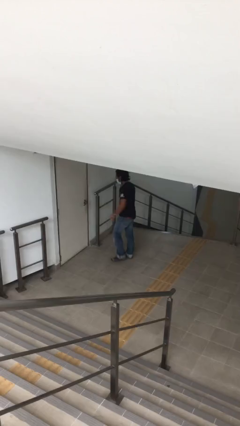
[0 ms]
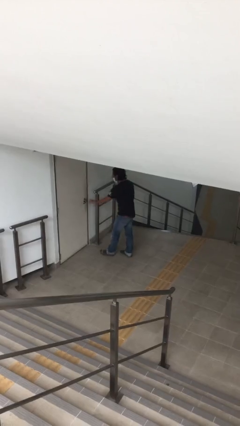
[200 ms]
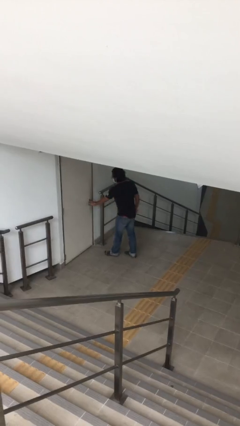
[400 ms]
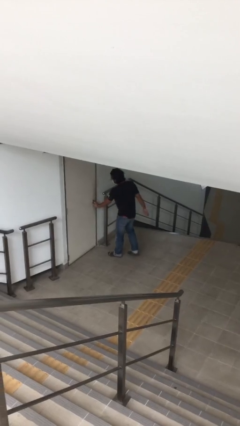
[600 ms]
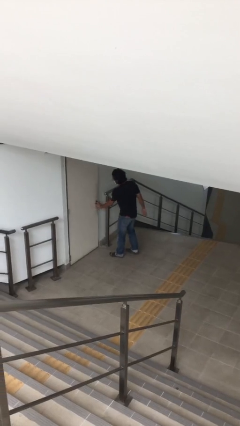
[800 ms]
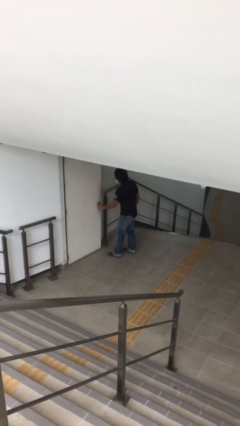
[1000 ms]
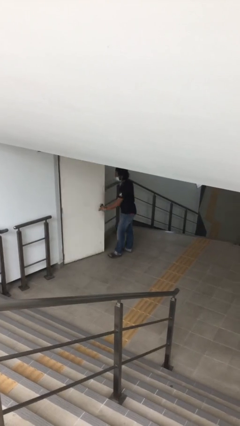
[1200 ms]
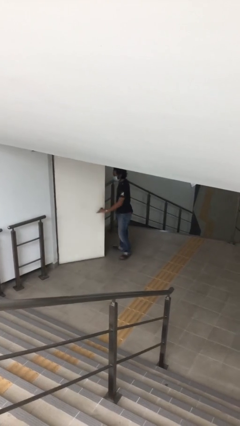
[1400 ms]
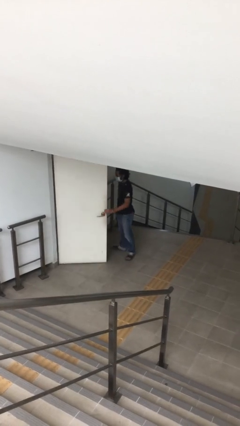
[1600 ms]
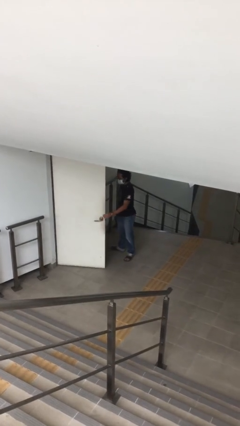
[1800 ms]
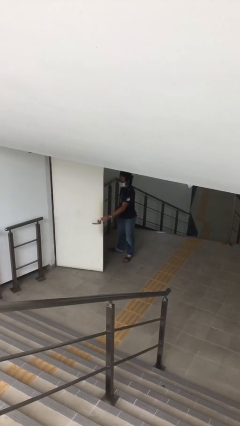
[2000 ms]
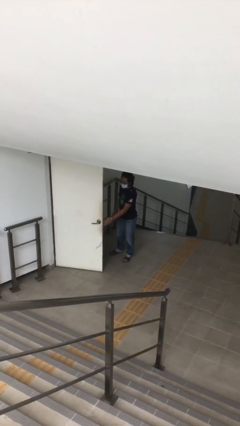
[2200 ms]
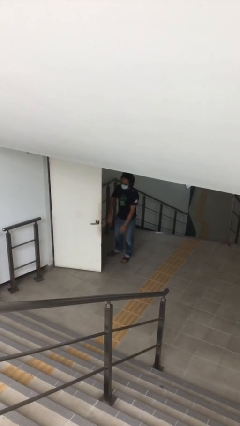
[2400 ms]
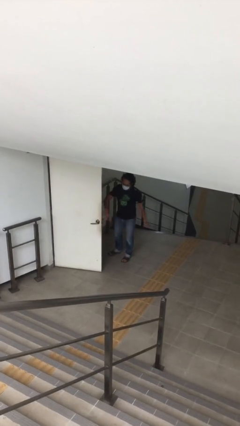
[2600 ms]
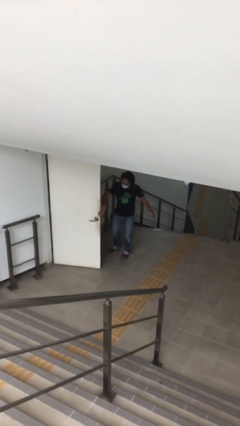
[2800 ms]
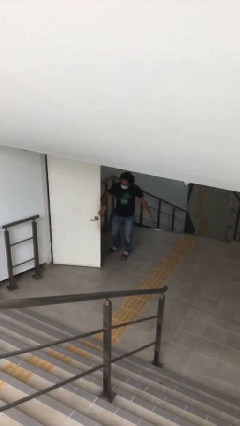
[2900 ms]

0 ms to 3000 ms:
person opens facility door

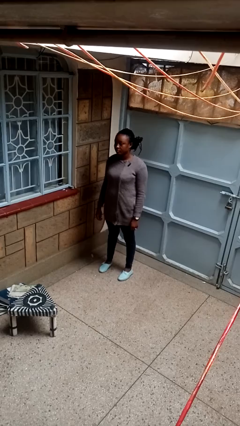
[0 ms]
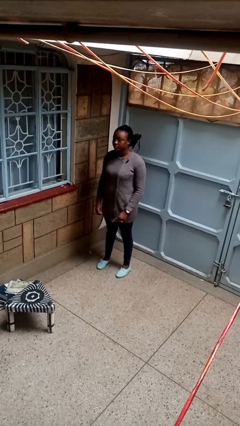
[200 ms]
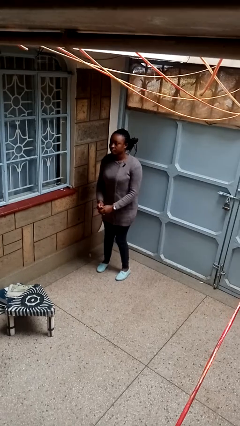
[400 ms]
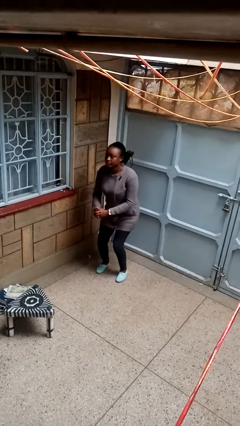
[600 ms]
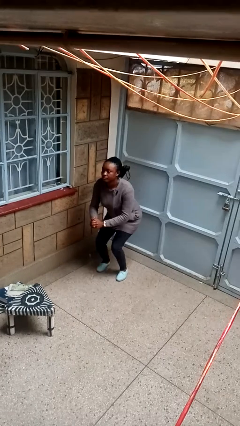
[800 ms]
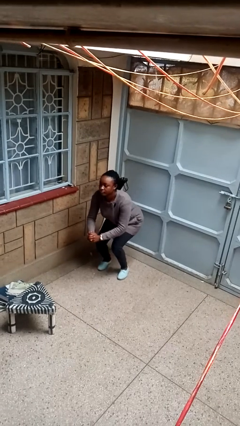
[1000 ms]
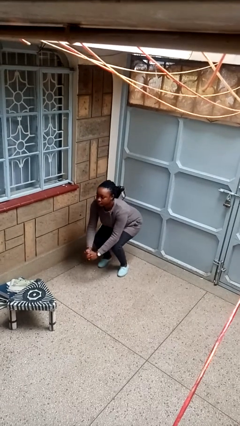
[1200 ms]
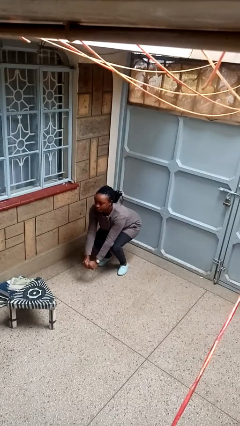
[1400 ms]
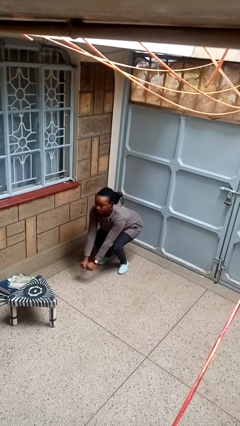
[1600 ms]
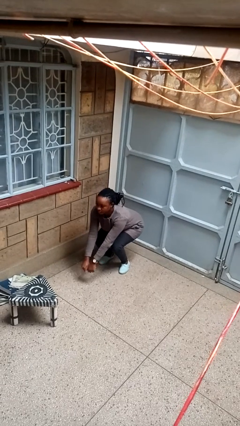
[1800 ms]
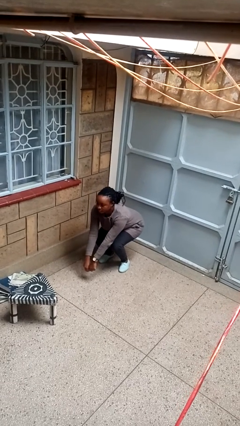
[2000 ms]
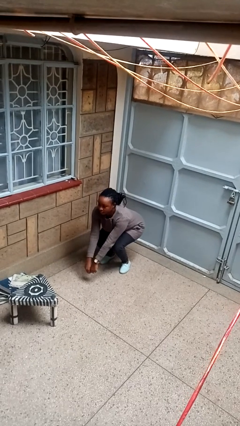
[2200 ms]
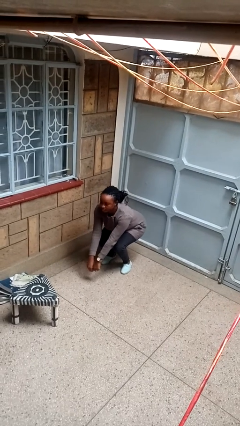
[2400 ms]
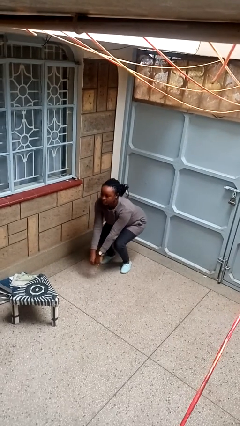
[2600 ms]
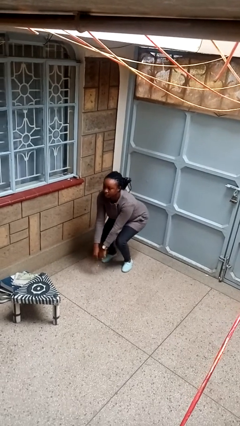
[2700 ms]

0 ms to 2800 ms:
person squats

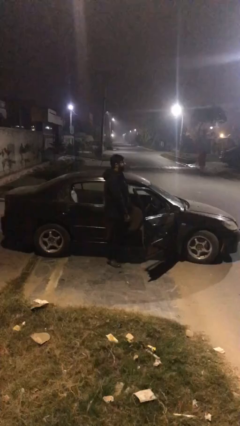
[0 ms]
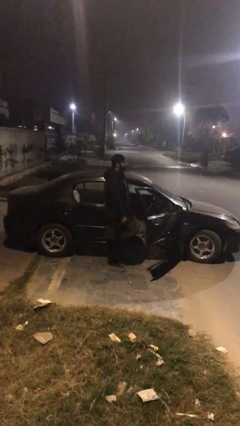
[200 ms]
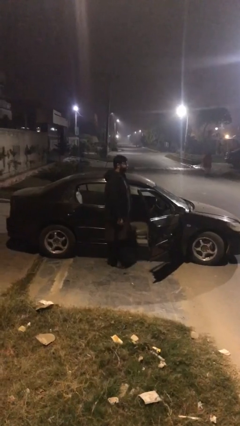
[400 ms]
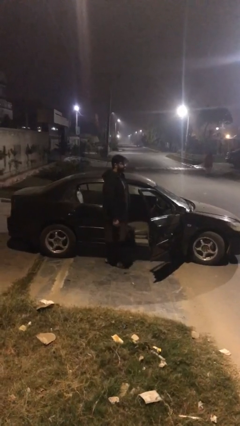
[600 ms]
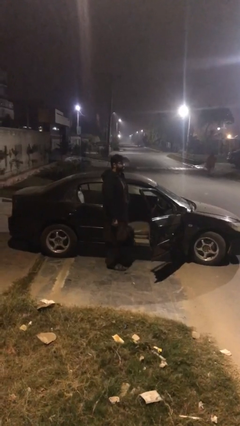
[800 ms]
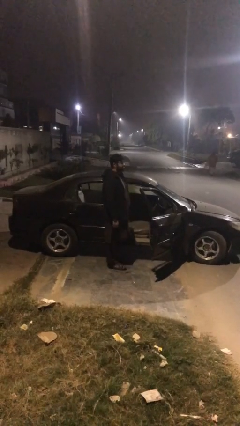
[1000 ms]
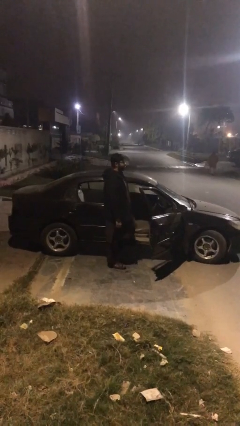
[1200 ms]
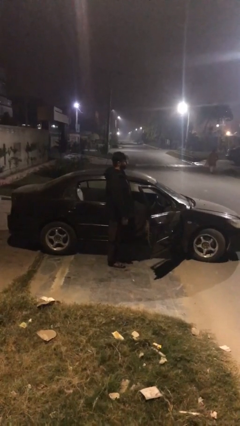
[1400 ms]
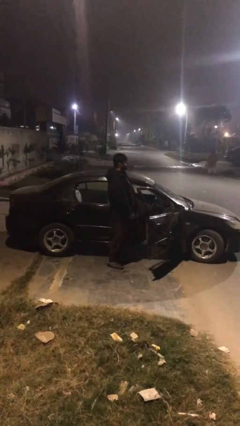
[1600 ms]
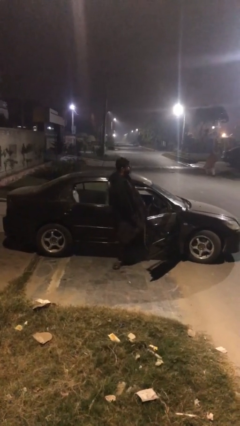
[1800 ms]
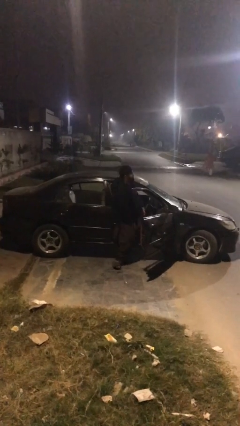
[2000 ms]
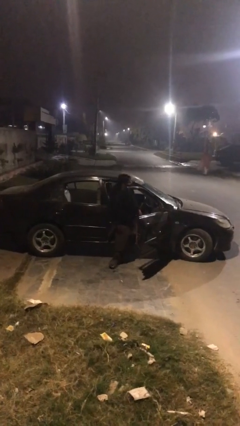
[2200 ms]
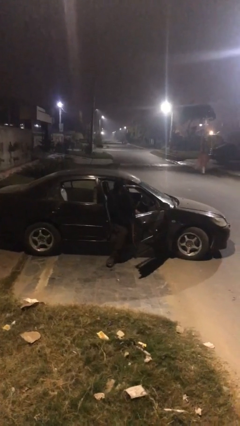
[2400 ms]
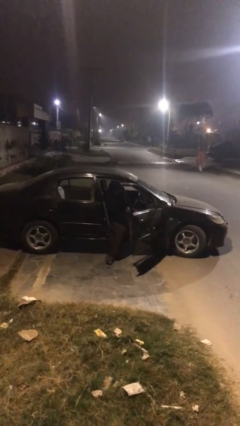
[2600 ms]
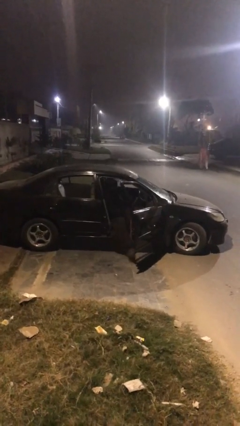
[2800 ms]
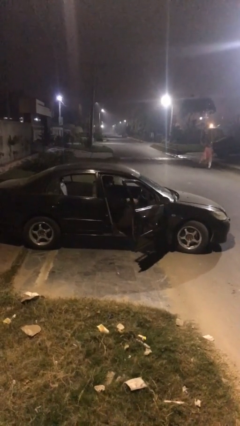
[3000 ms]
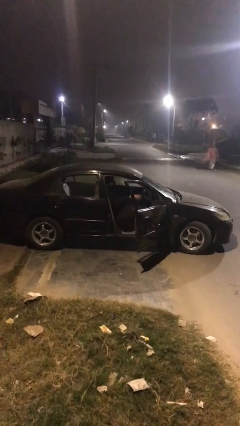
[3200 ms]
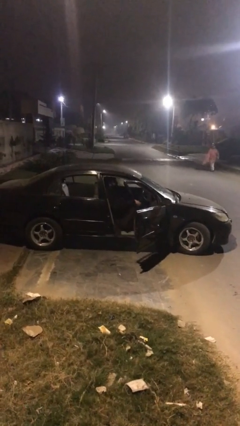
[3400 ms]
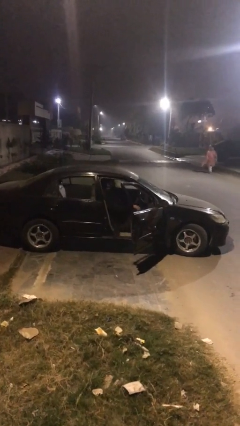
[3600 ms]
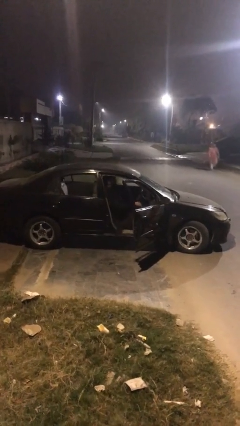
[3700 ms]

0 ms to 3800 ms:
person enters car

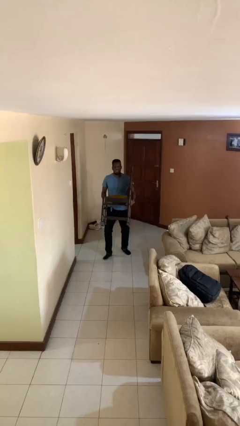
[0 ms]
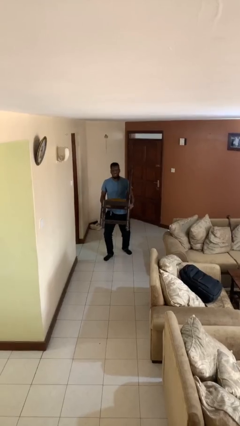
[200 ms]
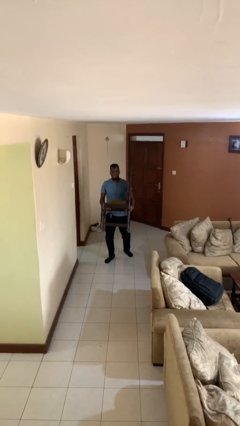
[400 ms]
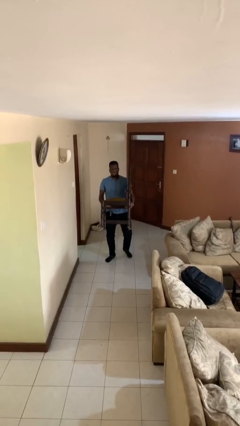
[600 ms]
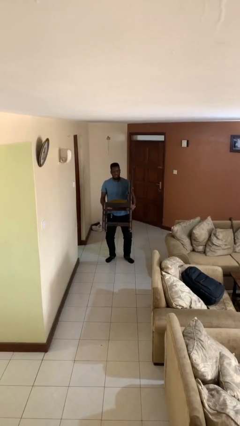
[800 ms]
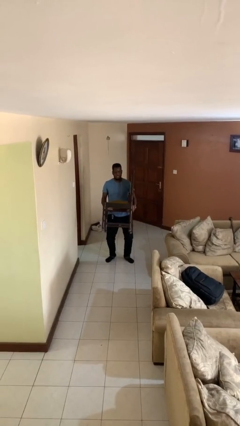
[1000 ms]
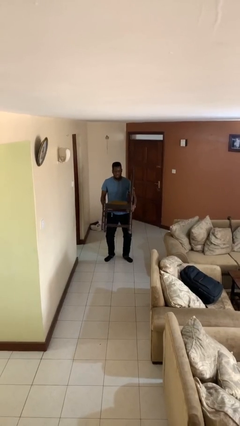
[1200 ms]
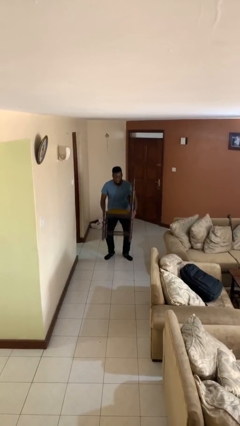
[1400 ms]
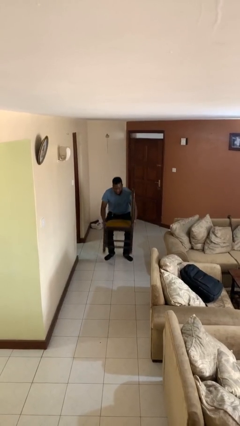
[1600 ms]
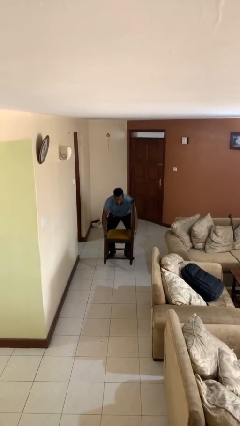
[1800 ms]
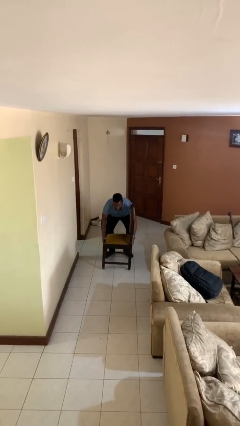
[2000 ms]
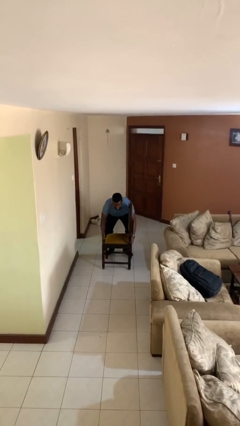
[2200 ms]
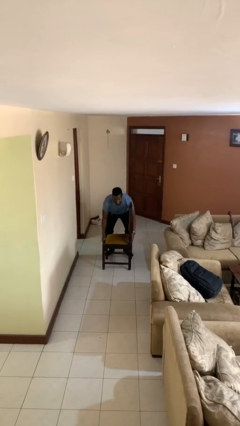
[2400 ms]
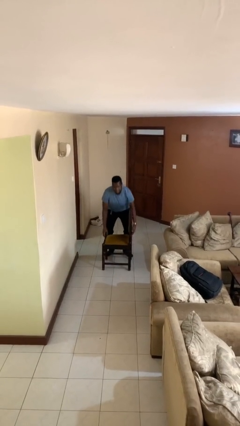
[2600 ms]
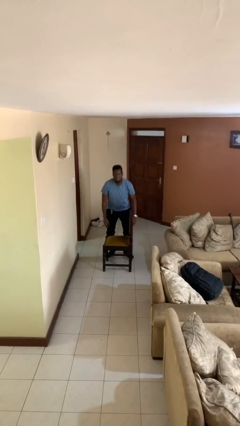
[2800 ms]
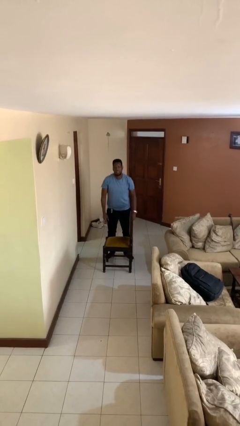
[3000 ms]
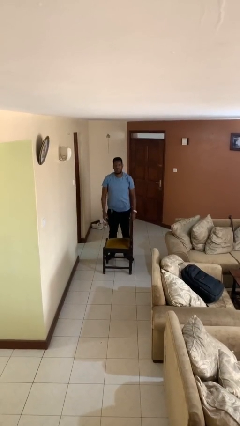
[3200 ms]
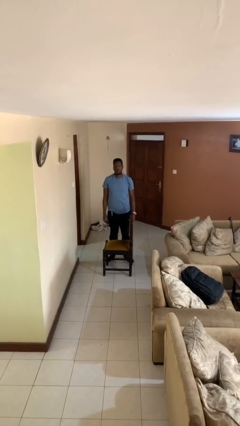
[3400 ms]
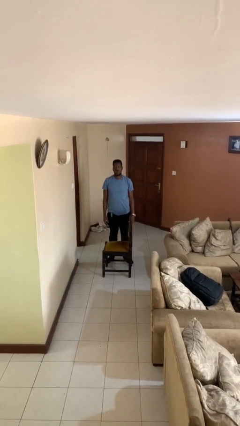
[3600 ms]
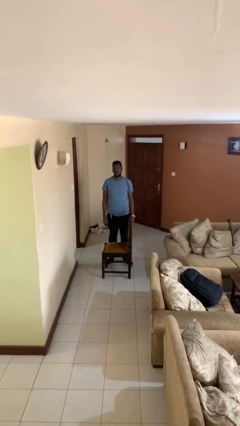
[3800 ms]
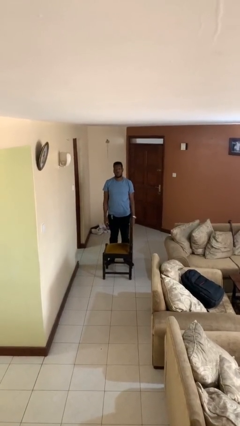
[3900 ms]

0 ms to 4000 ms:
person puts down object on floor

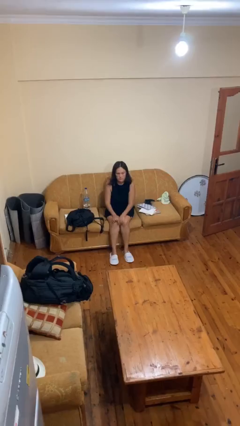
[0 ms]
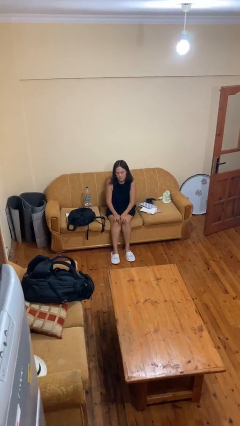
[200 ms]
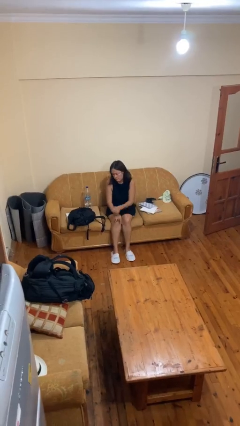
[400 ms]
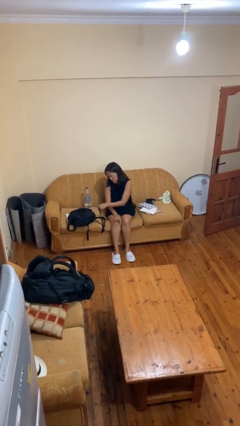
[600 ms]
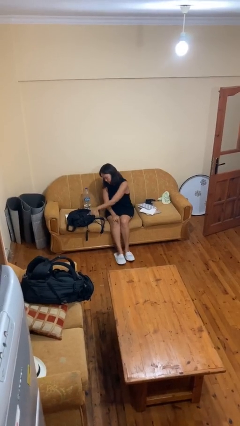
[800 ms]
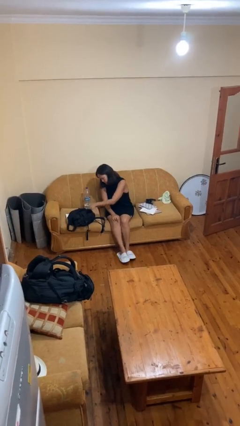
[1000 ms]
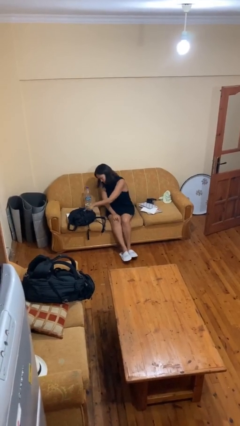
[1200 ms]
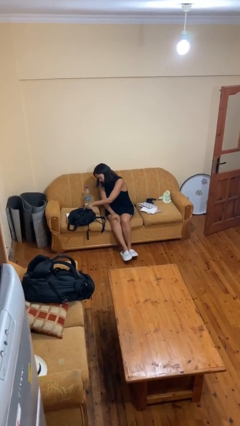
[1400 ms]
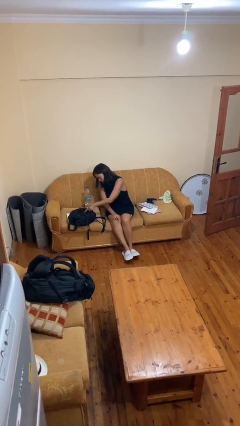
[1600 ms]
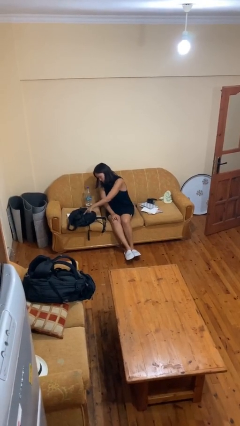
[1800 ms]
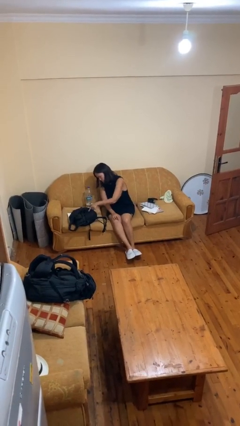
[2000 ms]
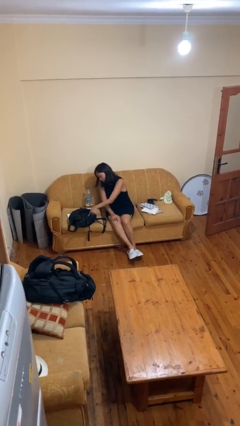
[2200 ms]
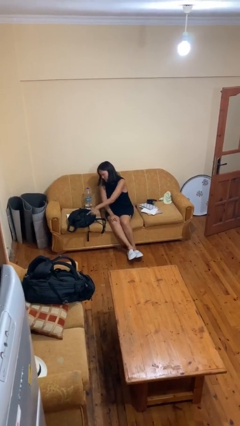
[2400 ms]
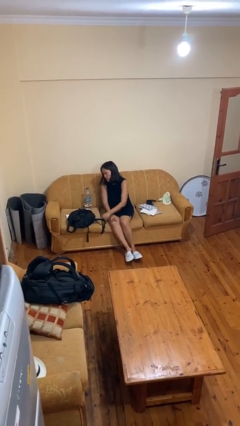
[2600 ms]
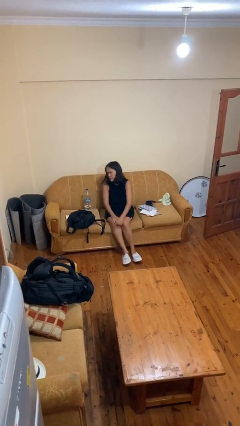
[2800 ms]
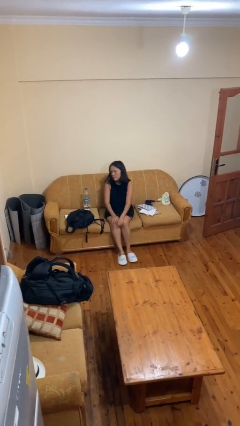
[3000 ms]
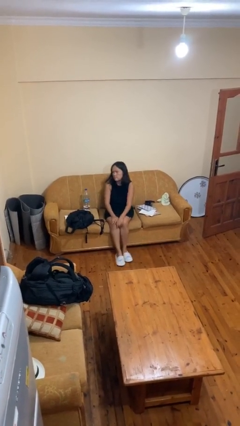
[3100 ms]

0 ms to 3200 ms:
person taps object with finger

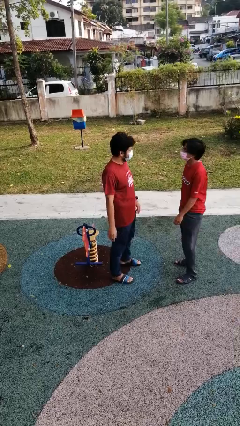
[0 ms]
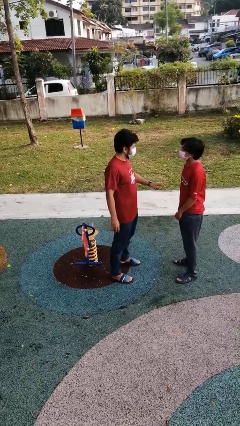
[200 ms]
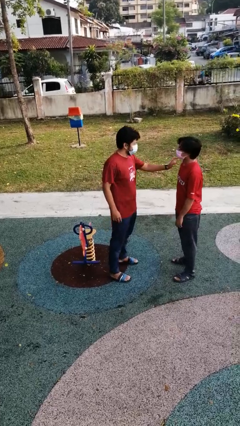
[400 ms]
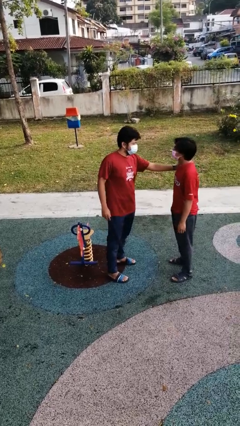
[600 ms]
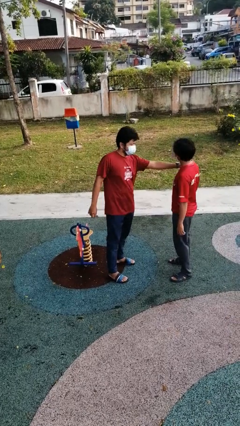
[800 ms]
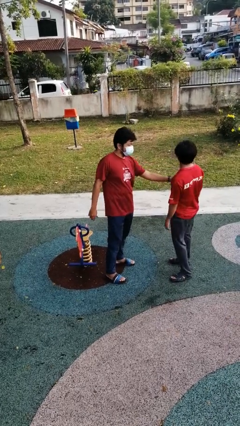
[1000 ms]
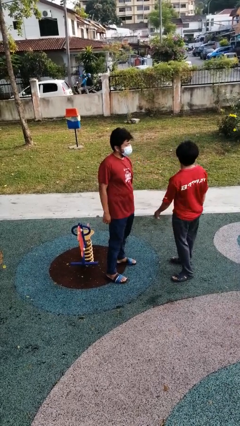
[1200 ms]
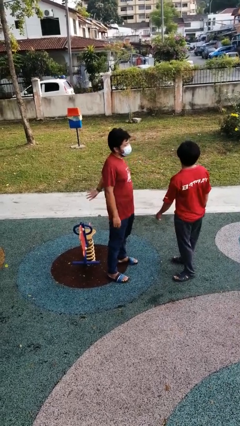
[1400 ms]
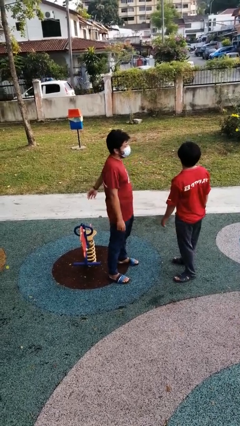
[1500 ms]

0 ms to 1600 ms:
person shoves person
